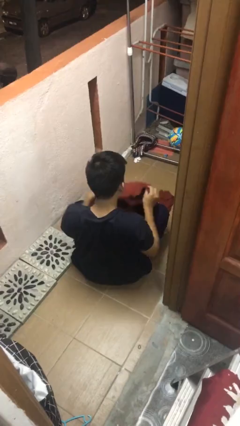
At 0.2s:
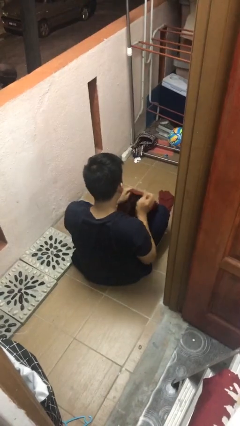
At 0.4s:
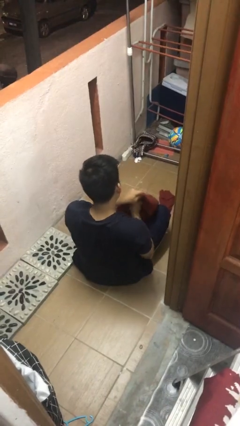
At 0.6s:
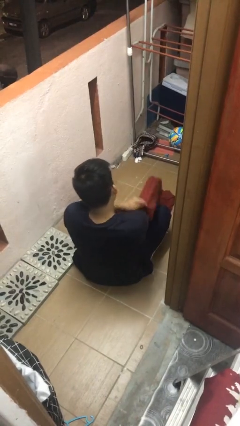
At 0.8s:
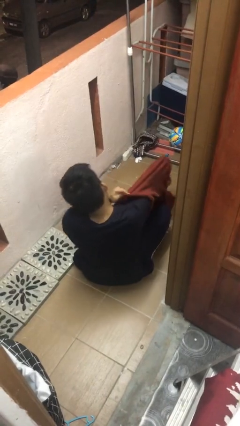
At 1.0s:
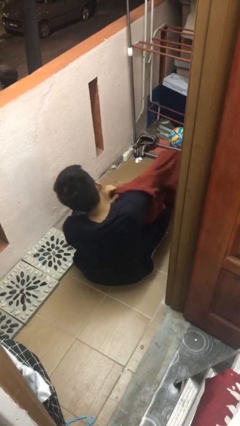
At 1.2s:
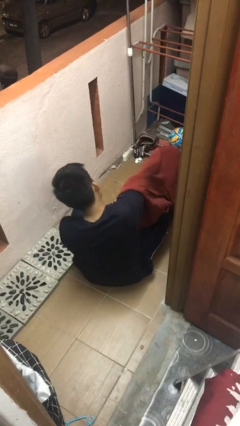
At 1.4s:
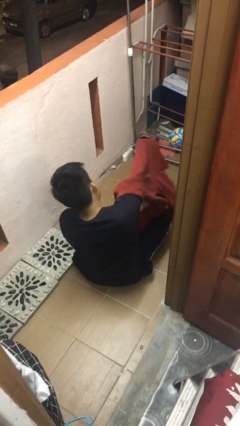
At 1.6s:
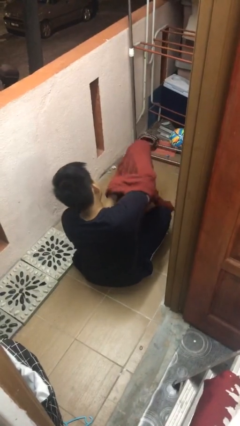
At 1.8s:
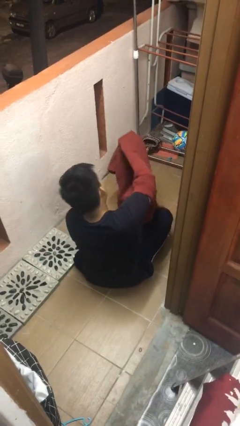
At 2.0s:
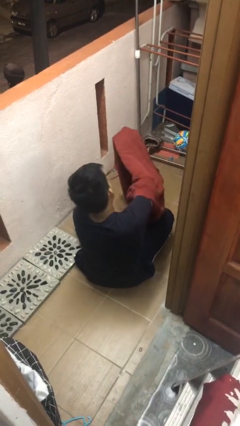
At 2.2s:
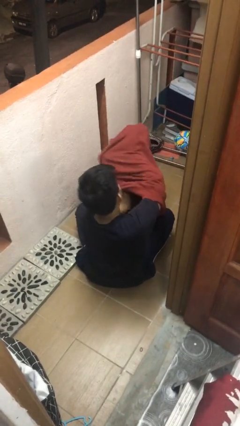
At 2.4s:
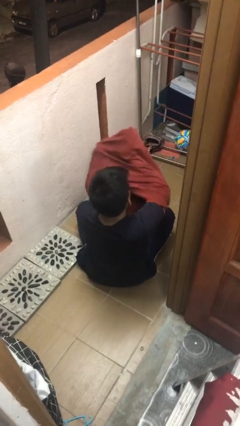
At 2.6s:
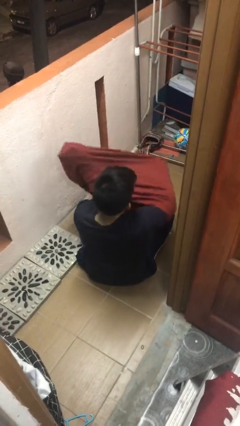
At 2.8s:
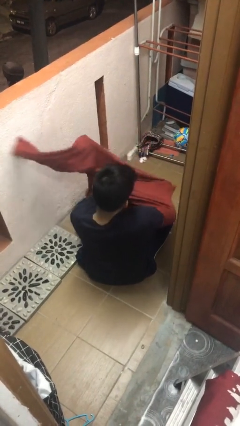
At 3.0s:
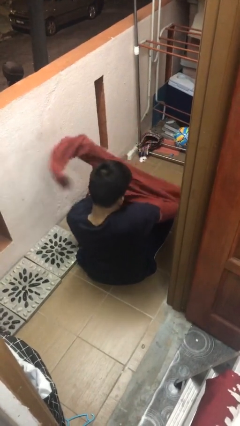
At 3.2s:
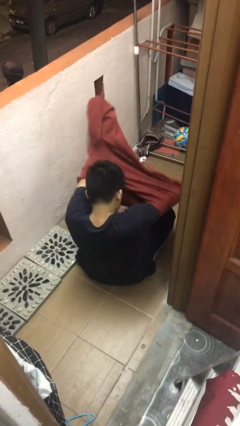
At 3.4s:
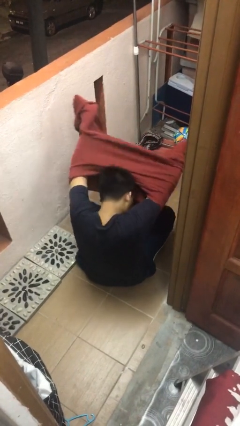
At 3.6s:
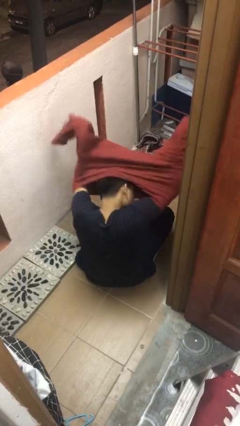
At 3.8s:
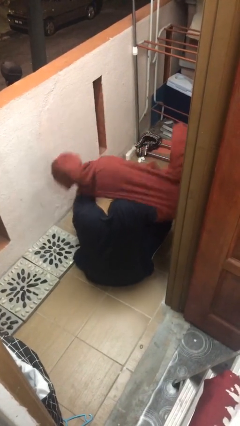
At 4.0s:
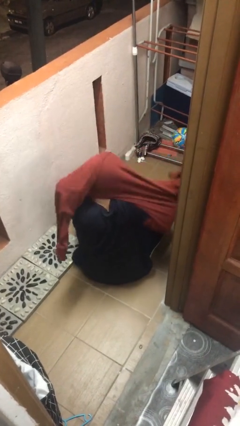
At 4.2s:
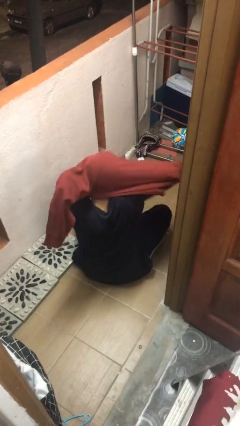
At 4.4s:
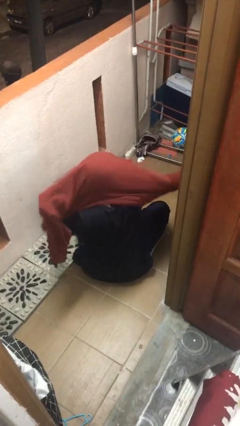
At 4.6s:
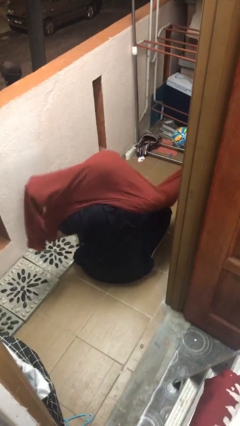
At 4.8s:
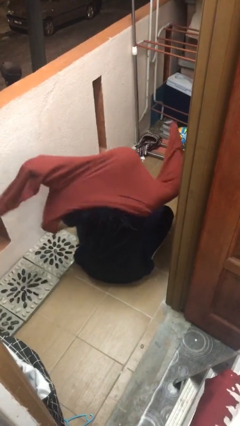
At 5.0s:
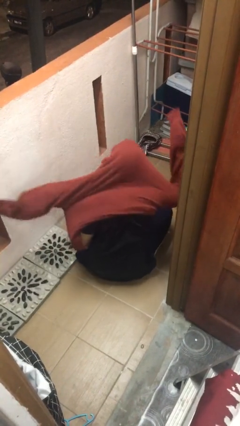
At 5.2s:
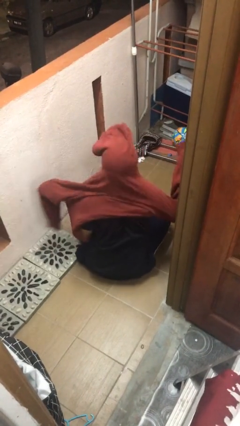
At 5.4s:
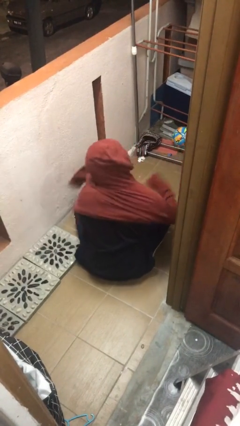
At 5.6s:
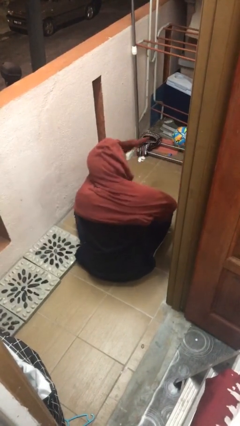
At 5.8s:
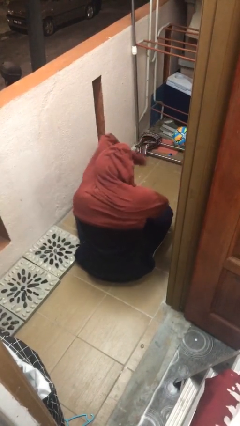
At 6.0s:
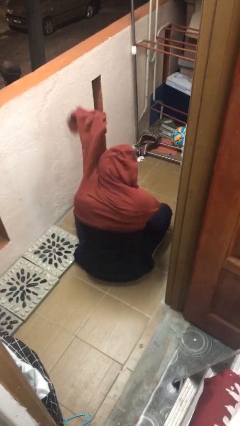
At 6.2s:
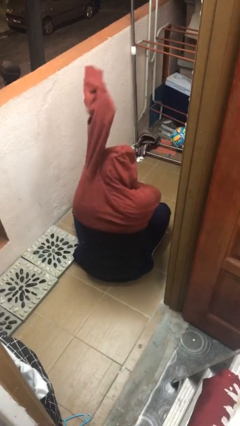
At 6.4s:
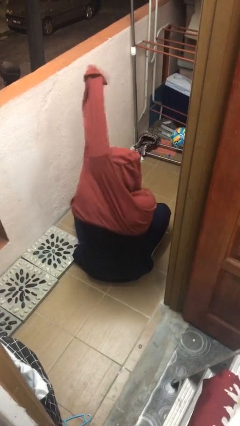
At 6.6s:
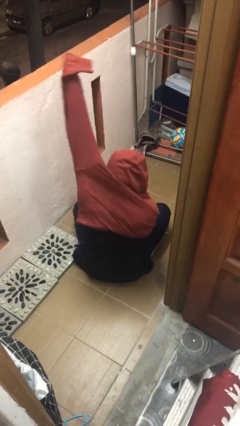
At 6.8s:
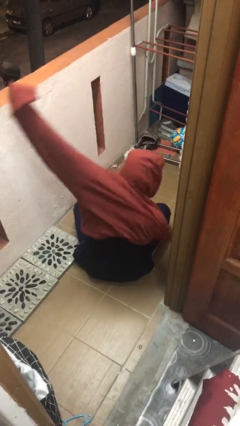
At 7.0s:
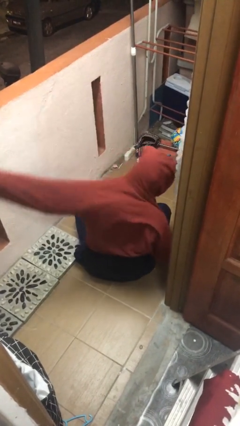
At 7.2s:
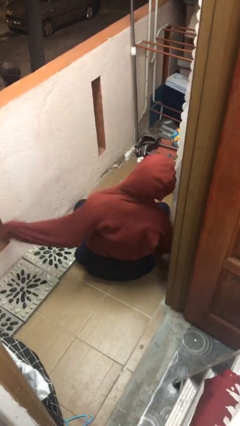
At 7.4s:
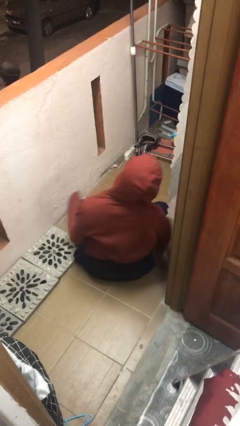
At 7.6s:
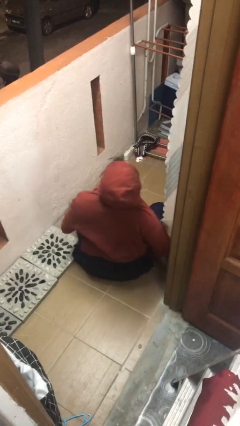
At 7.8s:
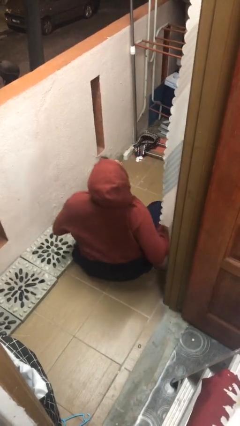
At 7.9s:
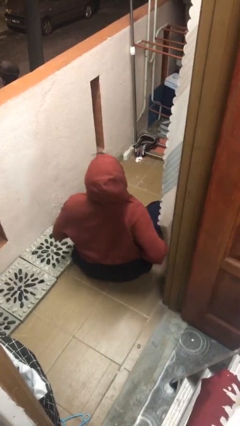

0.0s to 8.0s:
person puts on hoodie

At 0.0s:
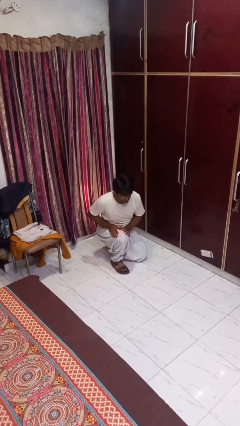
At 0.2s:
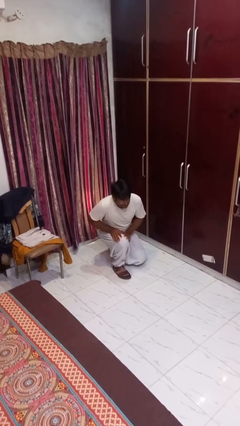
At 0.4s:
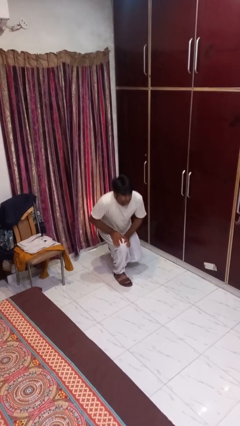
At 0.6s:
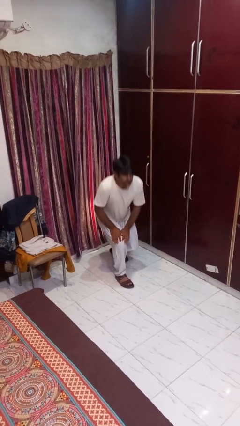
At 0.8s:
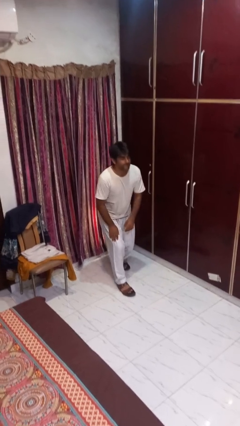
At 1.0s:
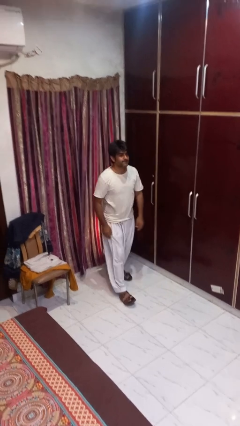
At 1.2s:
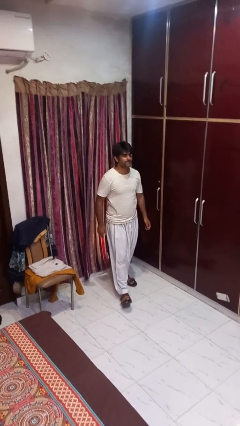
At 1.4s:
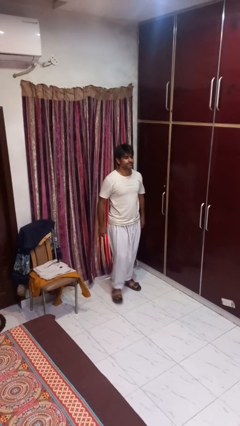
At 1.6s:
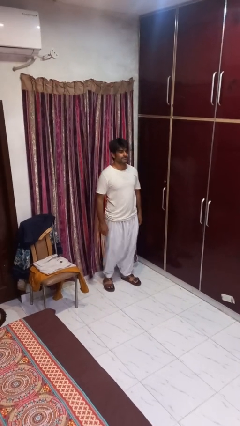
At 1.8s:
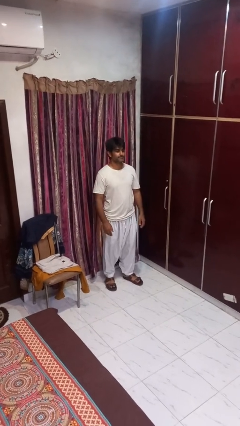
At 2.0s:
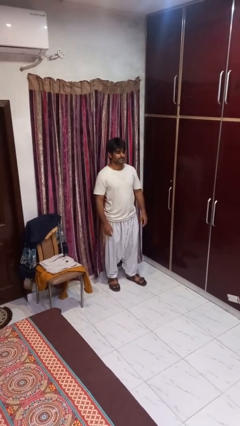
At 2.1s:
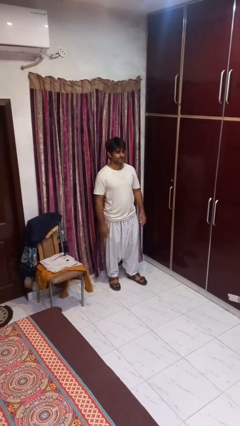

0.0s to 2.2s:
person stands up from floor

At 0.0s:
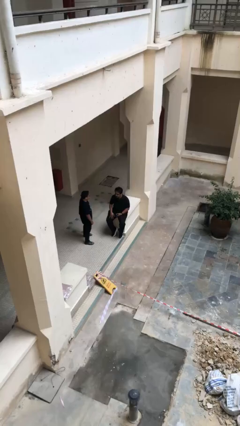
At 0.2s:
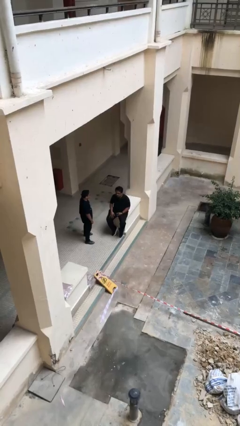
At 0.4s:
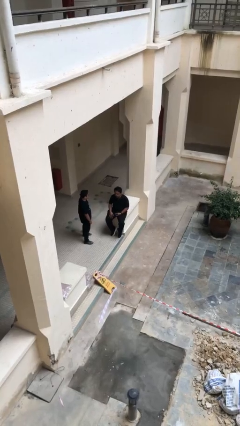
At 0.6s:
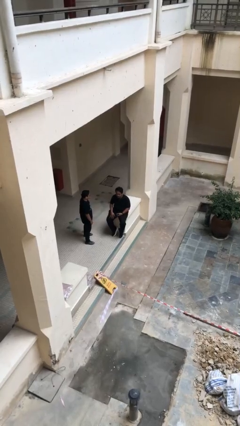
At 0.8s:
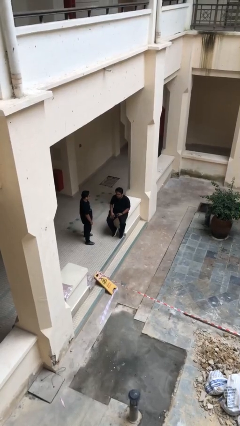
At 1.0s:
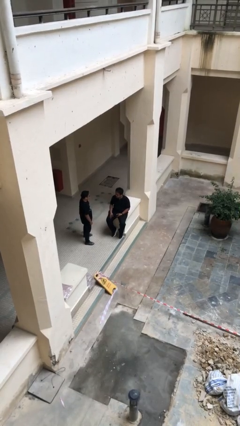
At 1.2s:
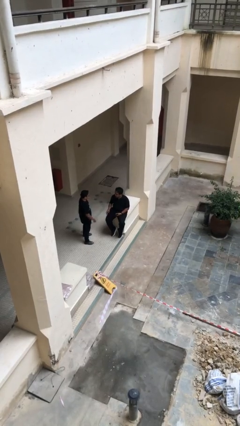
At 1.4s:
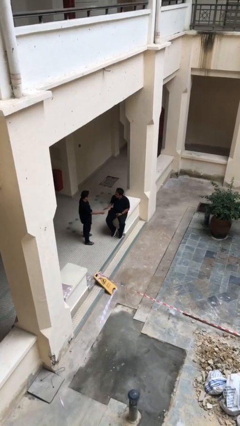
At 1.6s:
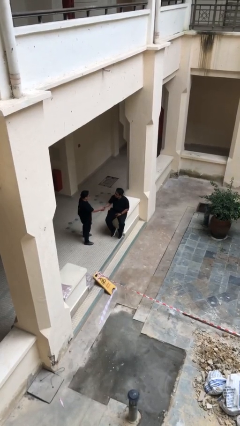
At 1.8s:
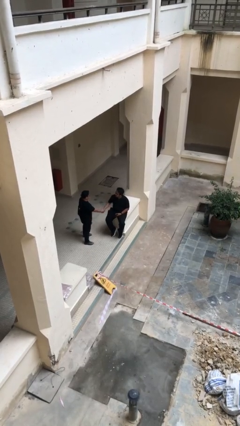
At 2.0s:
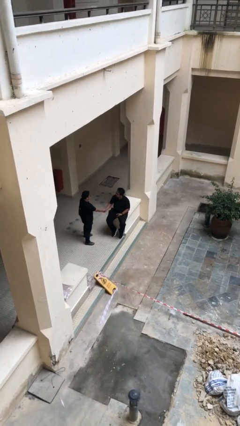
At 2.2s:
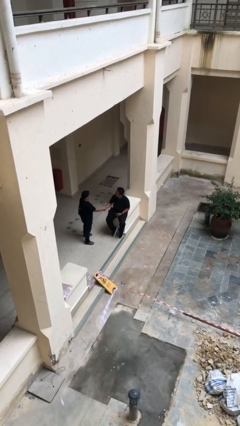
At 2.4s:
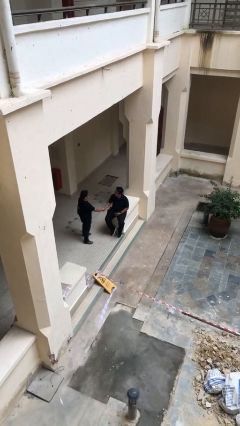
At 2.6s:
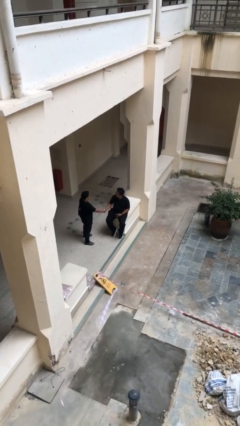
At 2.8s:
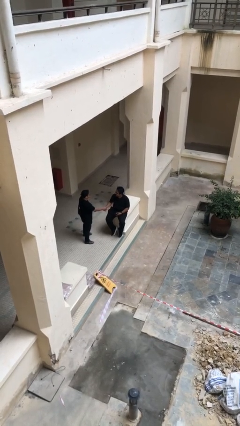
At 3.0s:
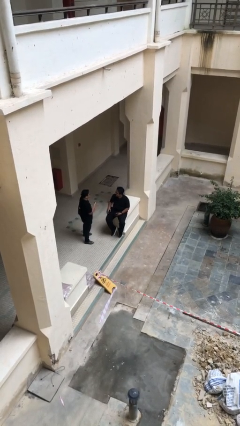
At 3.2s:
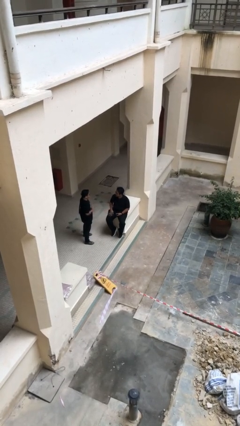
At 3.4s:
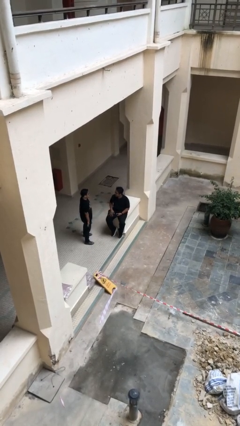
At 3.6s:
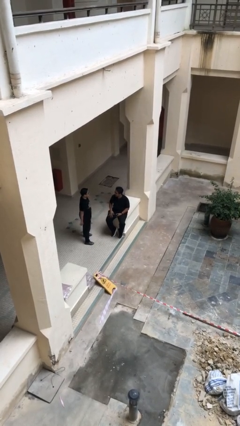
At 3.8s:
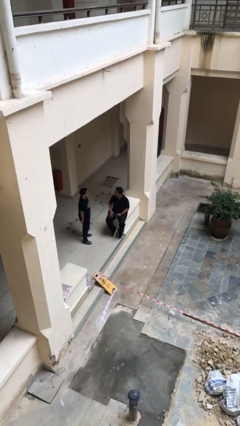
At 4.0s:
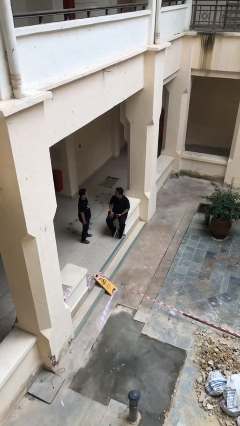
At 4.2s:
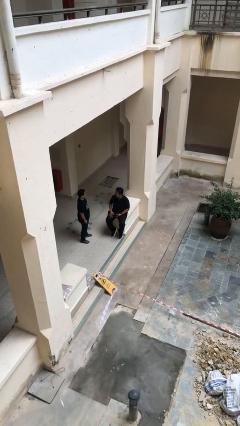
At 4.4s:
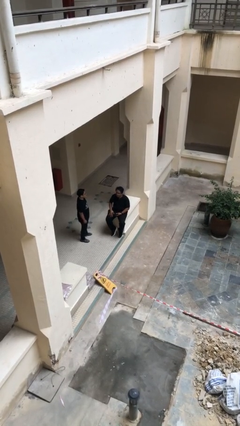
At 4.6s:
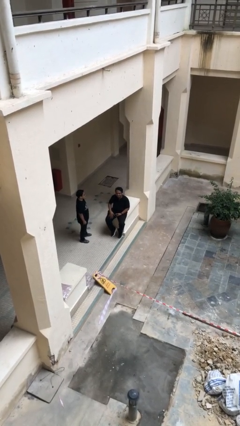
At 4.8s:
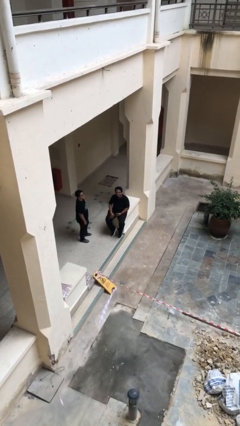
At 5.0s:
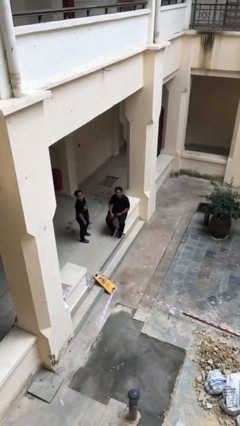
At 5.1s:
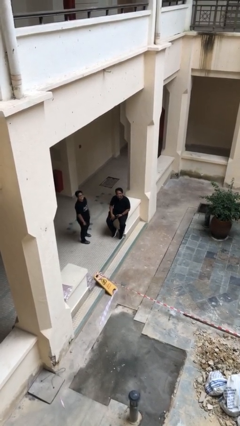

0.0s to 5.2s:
person shakes hand

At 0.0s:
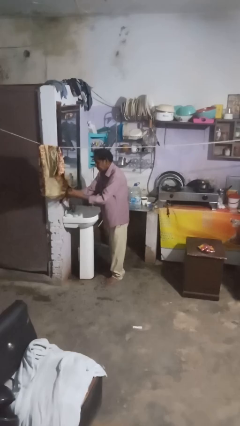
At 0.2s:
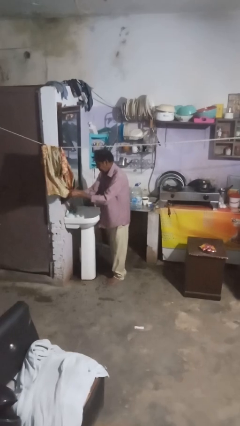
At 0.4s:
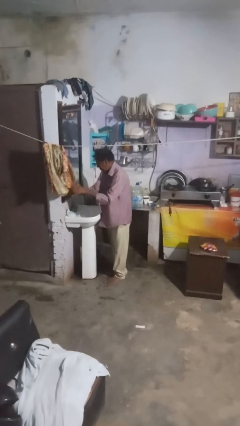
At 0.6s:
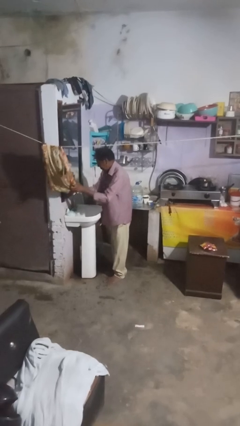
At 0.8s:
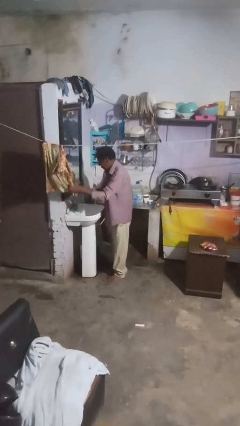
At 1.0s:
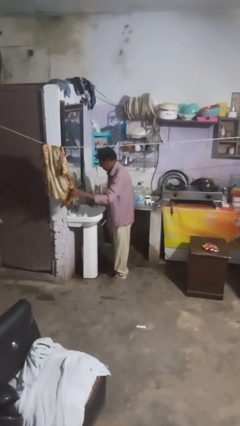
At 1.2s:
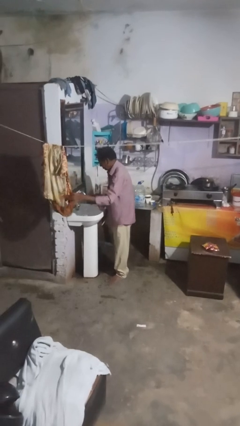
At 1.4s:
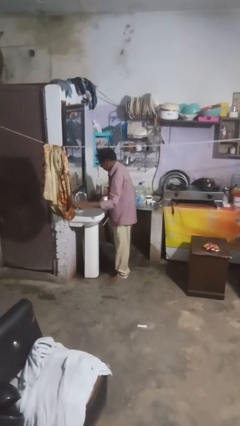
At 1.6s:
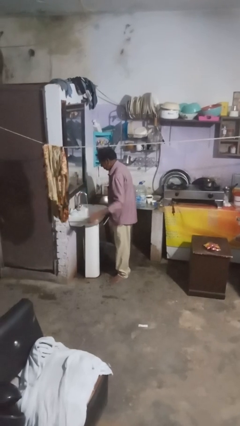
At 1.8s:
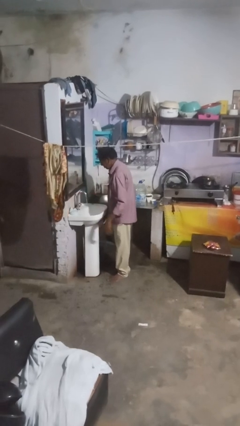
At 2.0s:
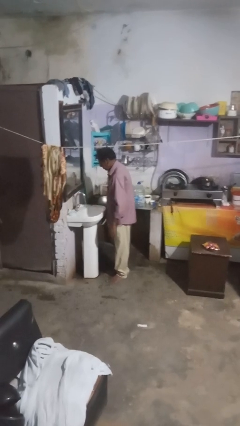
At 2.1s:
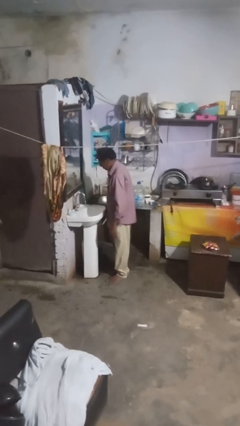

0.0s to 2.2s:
person dries hands with towel
